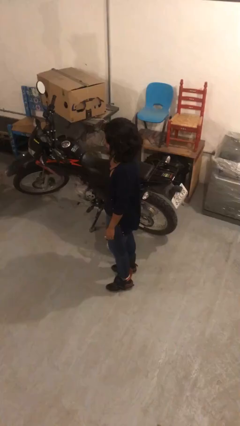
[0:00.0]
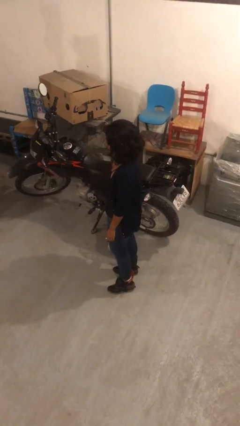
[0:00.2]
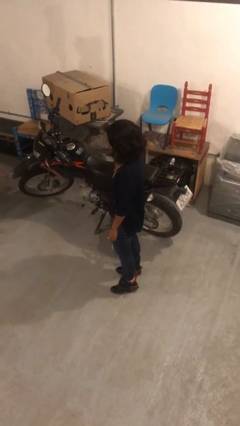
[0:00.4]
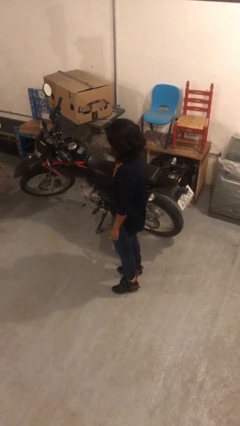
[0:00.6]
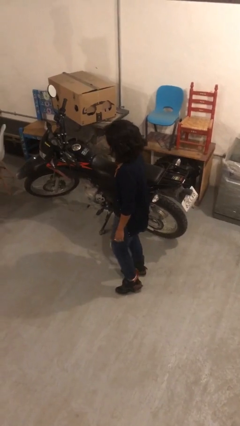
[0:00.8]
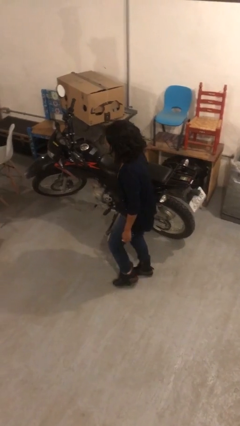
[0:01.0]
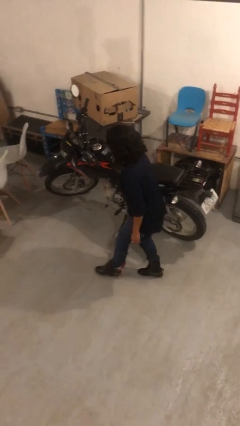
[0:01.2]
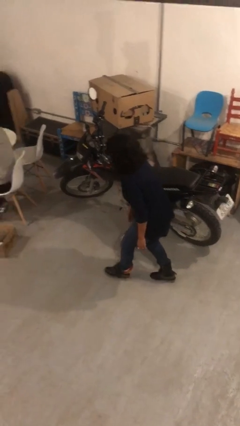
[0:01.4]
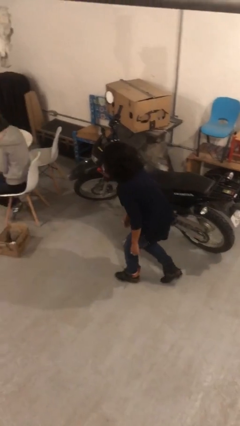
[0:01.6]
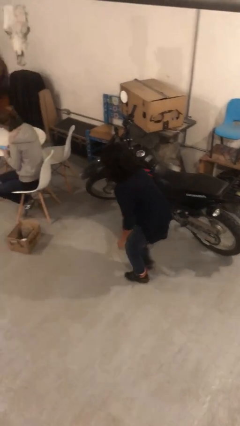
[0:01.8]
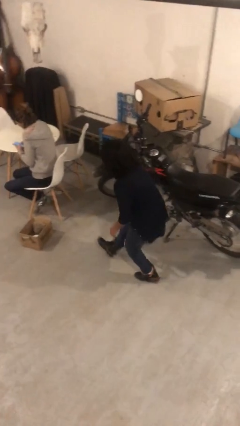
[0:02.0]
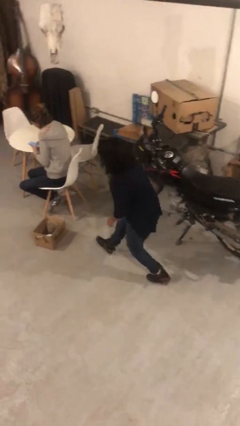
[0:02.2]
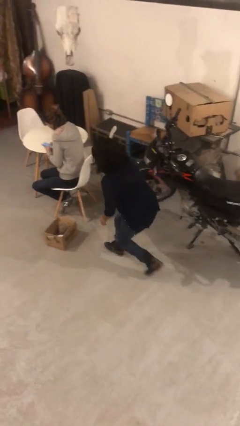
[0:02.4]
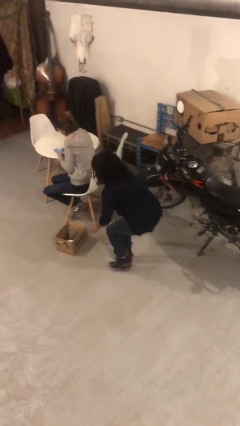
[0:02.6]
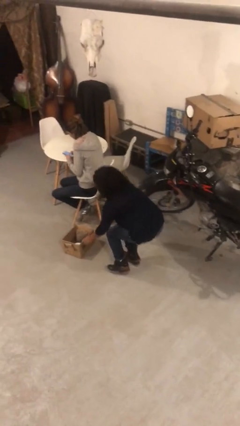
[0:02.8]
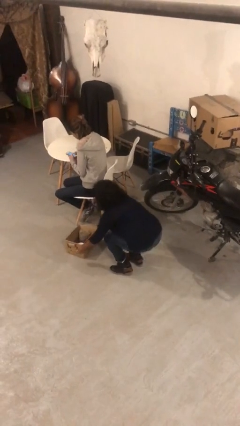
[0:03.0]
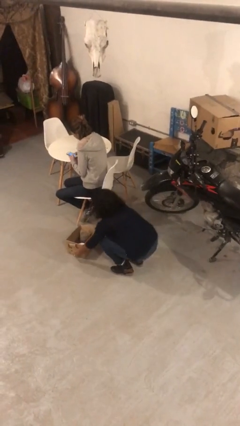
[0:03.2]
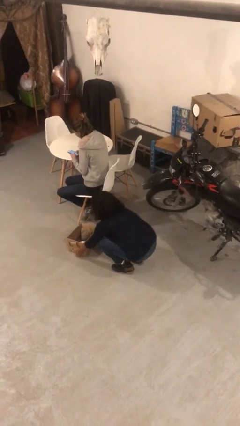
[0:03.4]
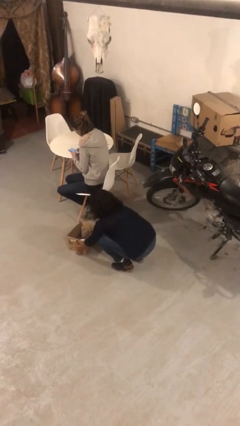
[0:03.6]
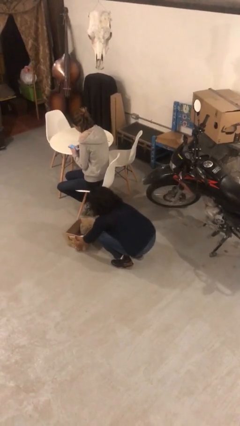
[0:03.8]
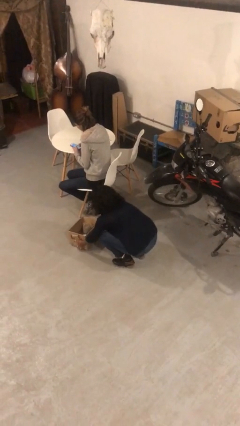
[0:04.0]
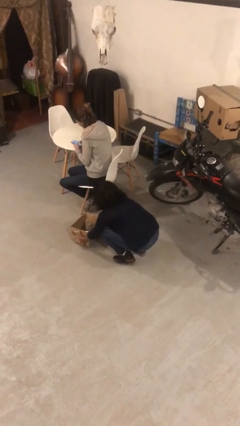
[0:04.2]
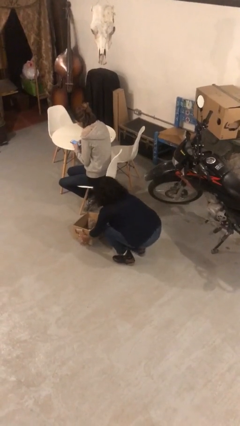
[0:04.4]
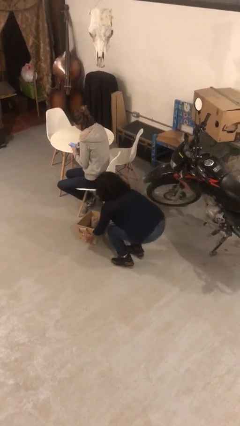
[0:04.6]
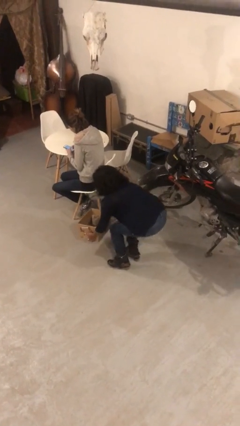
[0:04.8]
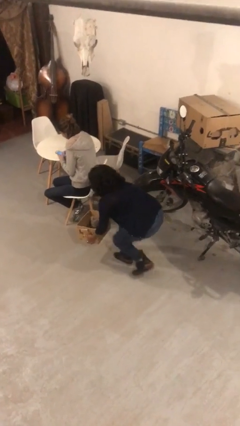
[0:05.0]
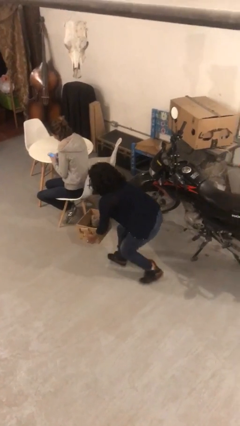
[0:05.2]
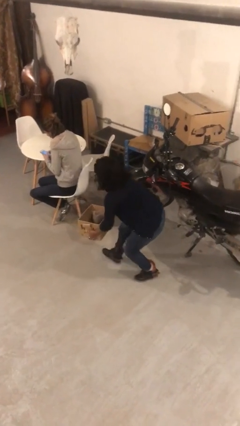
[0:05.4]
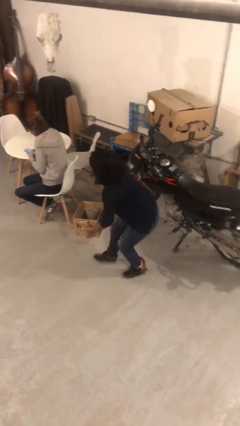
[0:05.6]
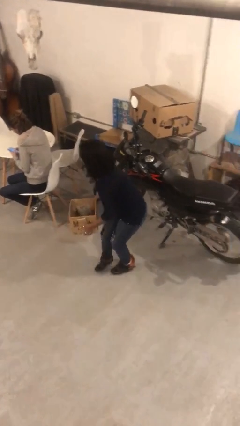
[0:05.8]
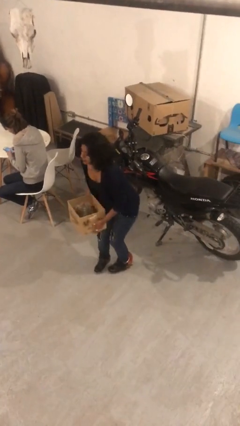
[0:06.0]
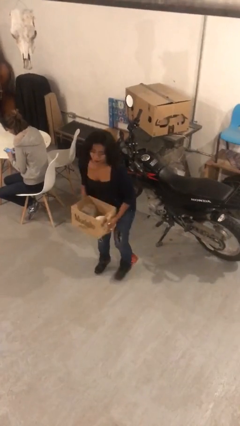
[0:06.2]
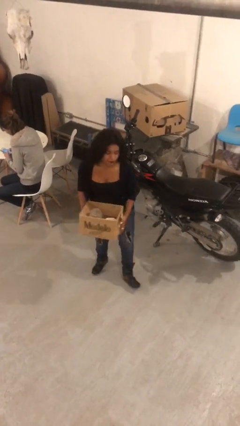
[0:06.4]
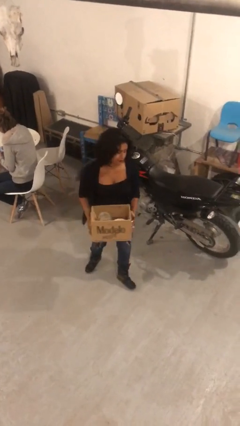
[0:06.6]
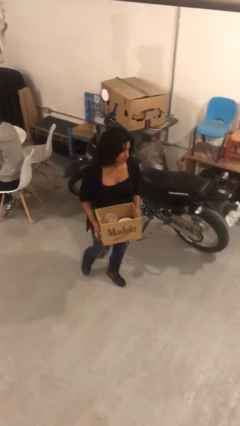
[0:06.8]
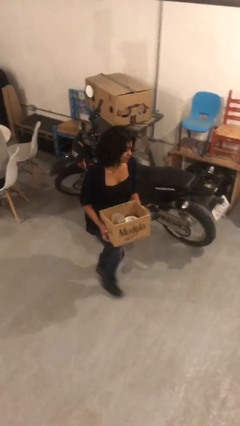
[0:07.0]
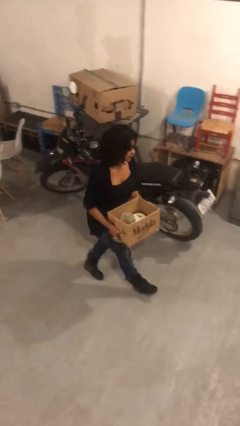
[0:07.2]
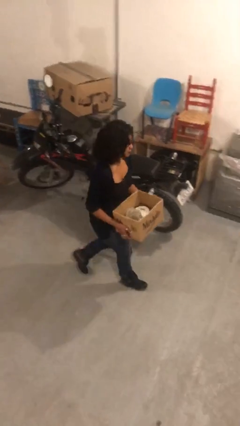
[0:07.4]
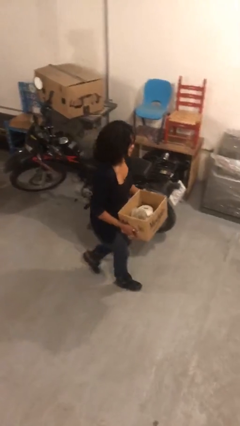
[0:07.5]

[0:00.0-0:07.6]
person steals object from person

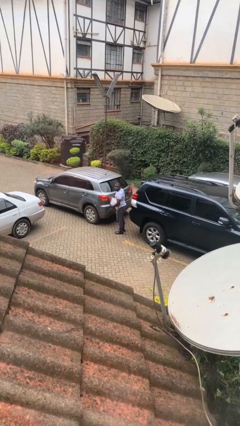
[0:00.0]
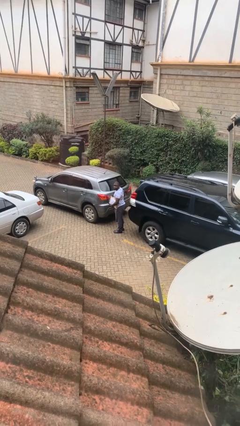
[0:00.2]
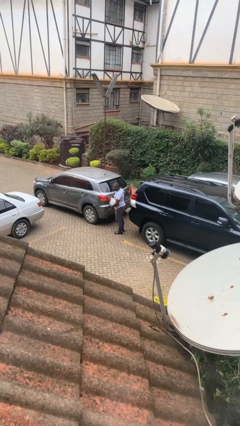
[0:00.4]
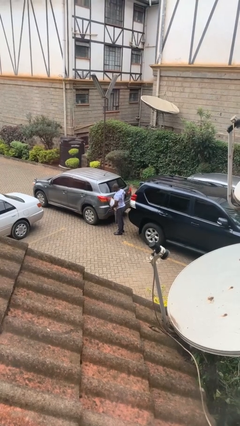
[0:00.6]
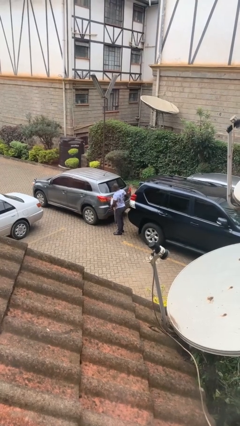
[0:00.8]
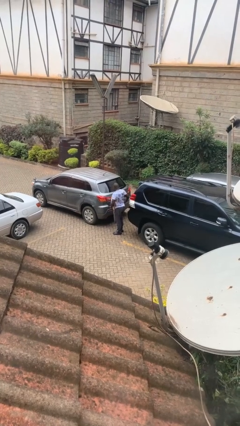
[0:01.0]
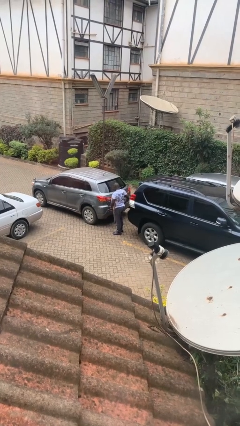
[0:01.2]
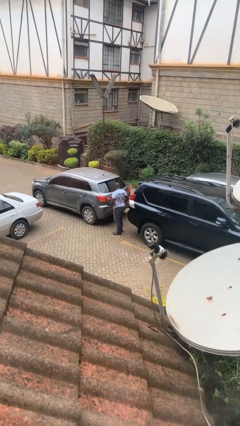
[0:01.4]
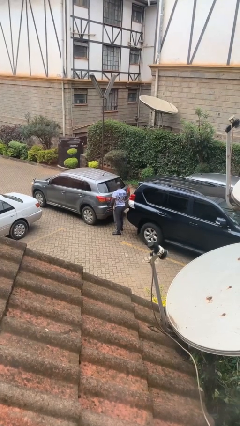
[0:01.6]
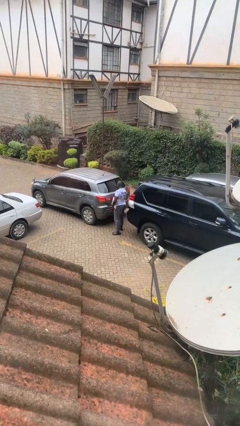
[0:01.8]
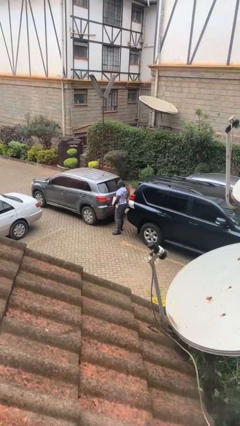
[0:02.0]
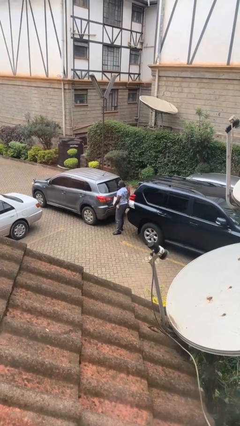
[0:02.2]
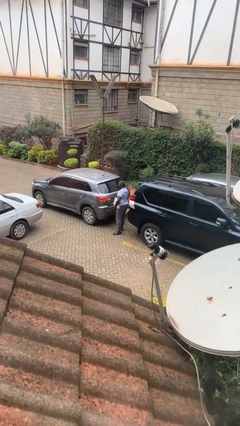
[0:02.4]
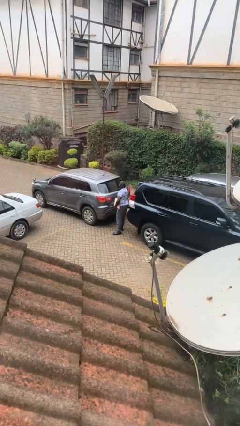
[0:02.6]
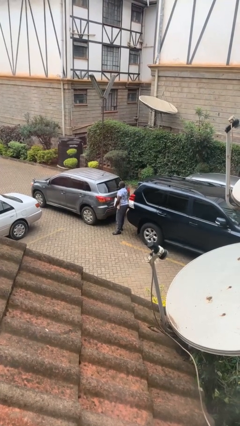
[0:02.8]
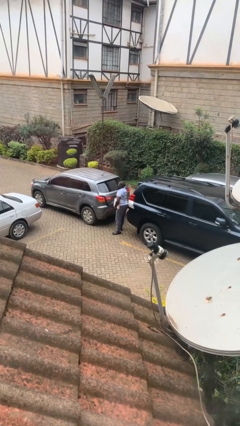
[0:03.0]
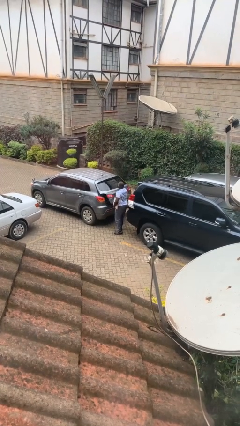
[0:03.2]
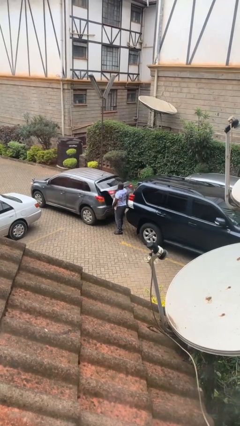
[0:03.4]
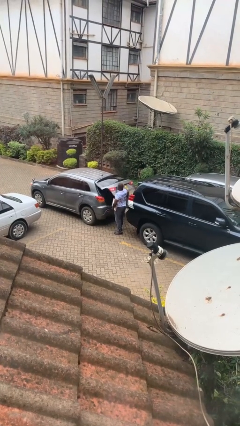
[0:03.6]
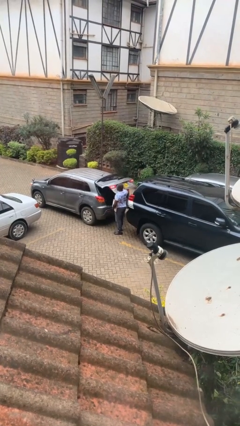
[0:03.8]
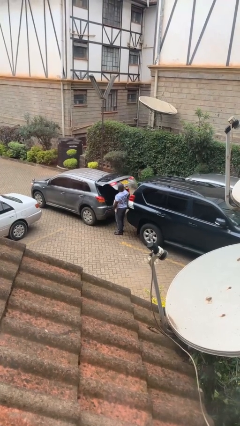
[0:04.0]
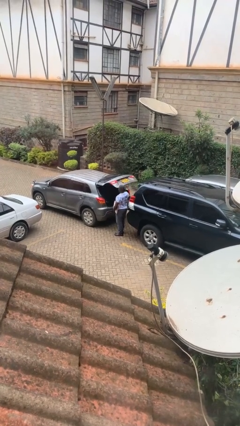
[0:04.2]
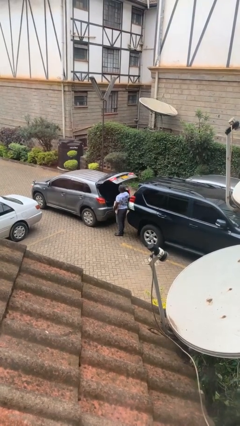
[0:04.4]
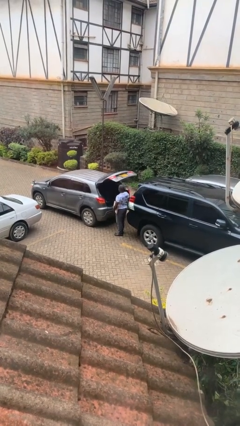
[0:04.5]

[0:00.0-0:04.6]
person opens car trunk

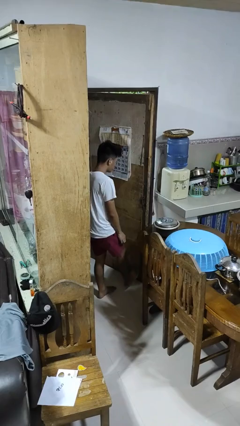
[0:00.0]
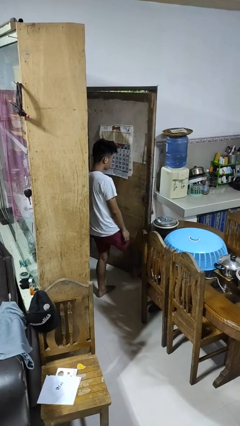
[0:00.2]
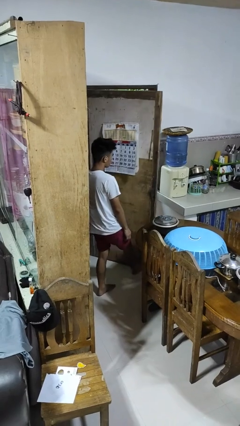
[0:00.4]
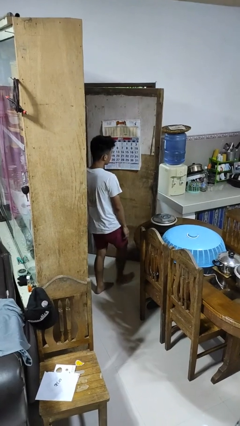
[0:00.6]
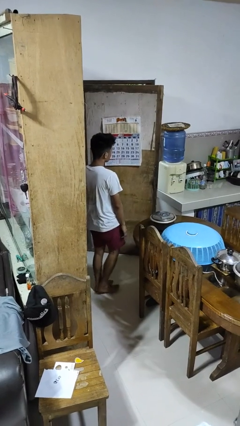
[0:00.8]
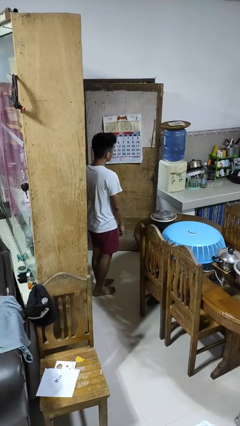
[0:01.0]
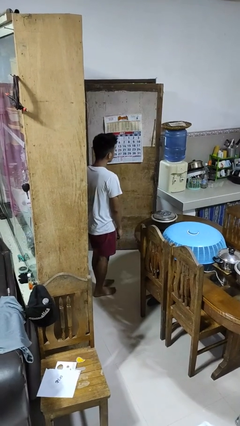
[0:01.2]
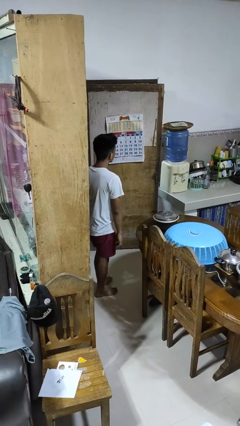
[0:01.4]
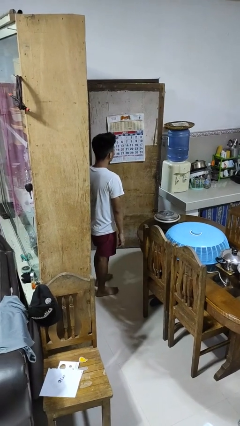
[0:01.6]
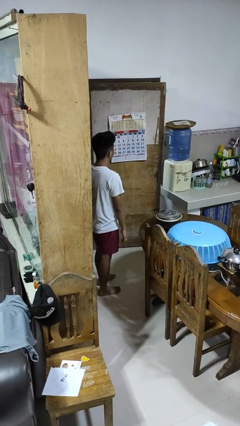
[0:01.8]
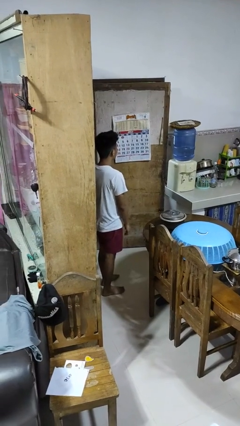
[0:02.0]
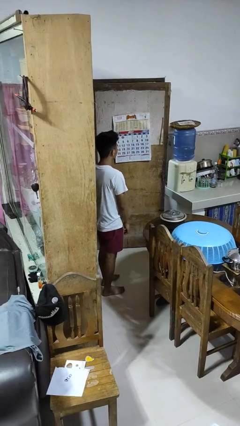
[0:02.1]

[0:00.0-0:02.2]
person closes door with foot

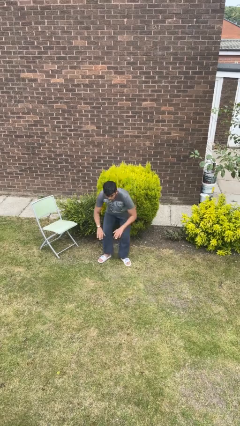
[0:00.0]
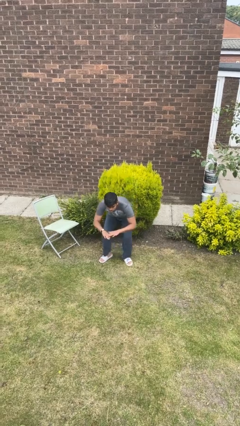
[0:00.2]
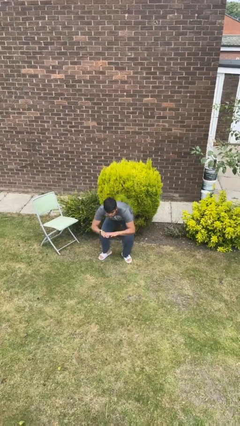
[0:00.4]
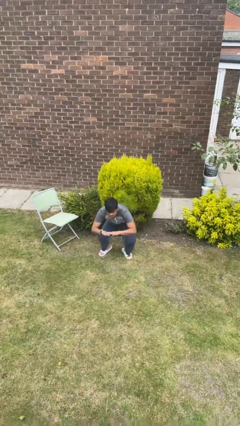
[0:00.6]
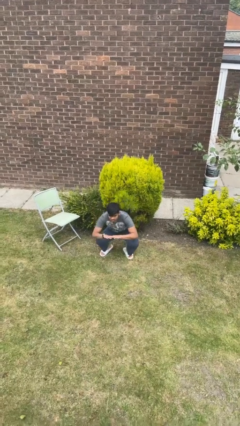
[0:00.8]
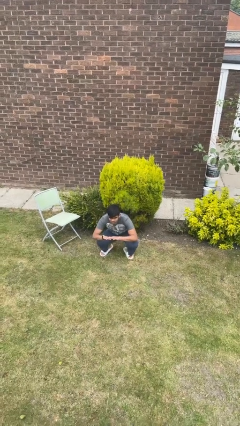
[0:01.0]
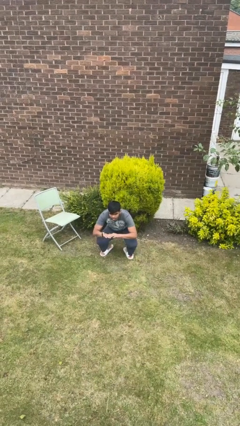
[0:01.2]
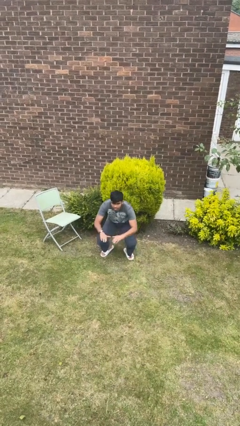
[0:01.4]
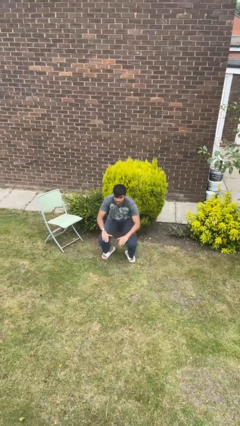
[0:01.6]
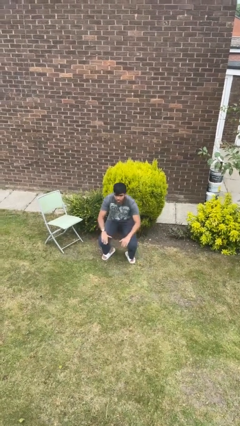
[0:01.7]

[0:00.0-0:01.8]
person squats

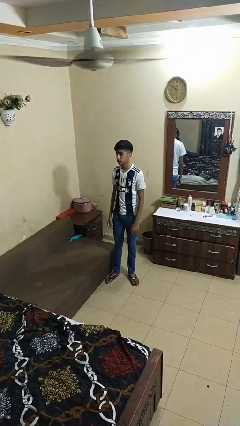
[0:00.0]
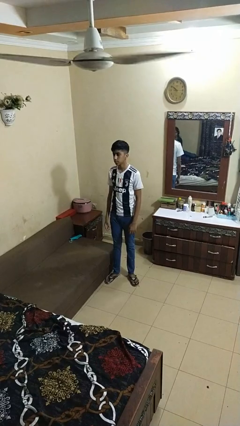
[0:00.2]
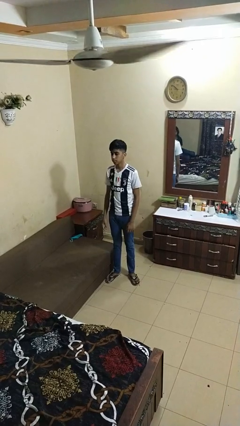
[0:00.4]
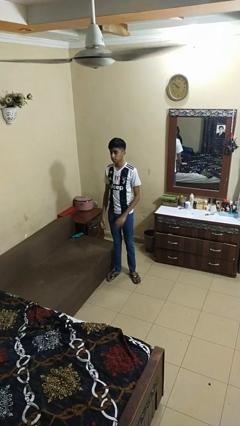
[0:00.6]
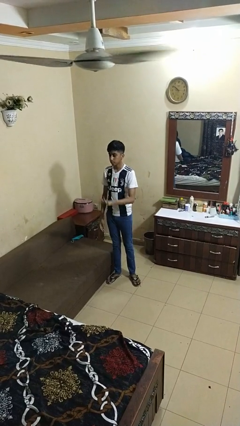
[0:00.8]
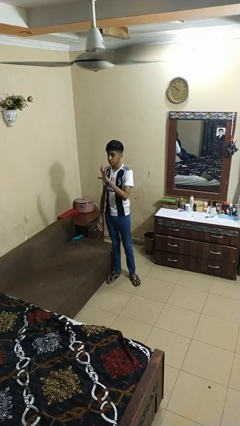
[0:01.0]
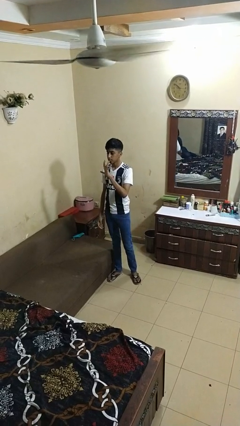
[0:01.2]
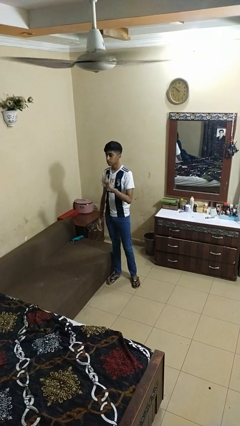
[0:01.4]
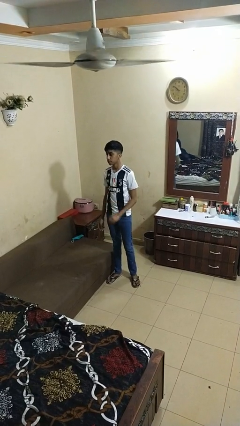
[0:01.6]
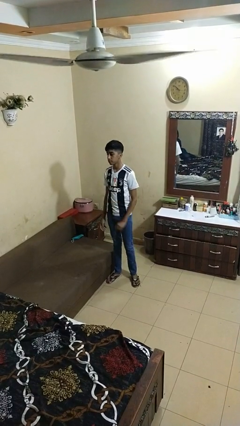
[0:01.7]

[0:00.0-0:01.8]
person gestures number five
